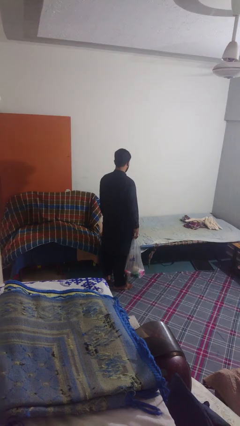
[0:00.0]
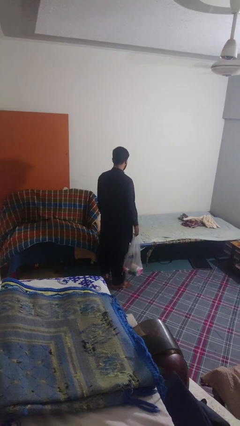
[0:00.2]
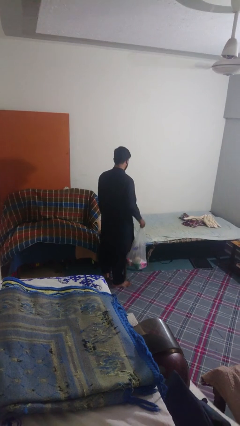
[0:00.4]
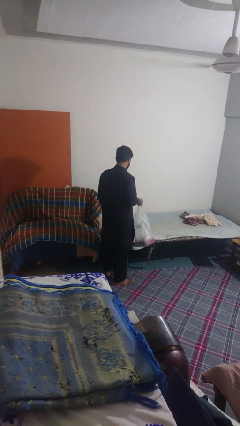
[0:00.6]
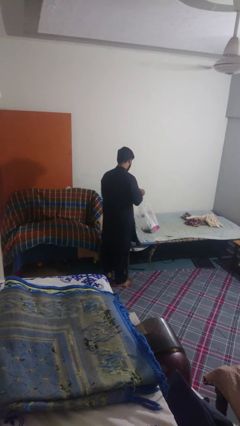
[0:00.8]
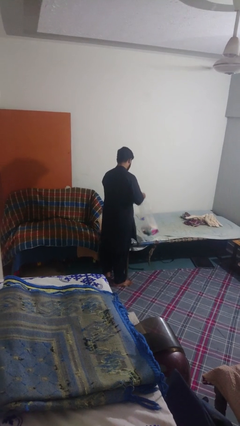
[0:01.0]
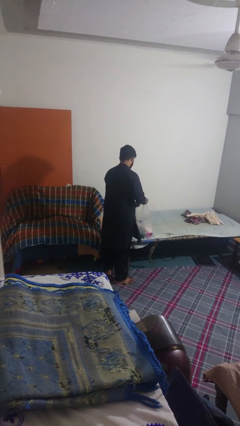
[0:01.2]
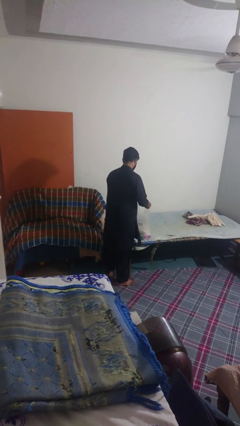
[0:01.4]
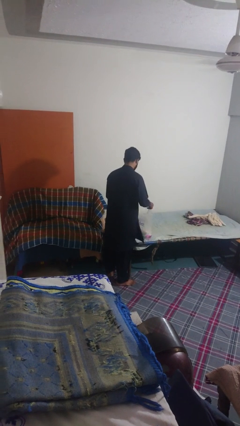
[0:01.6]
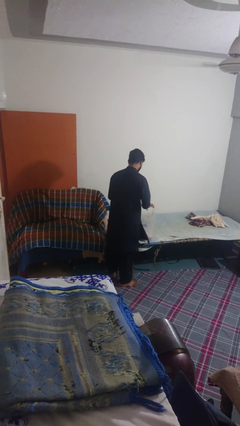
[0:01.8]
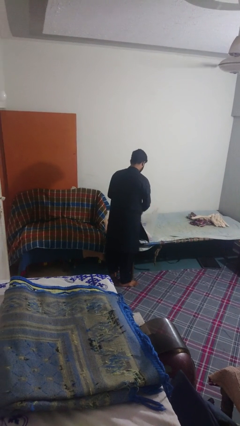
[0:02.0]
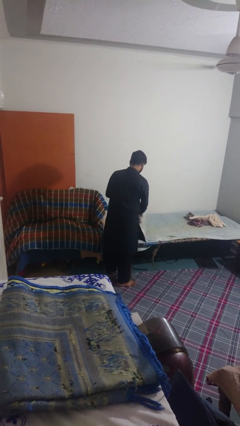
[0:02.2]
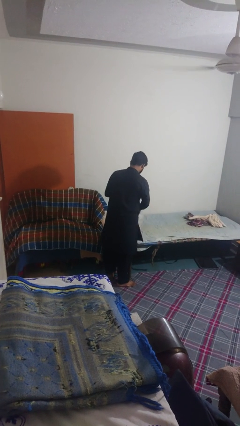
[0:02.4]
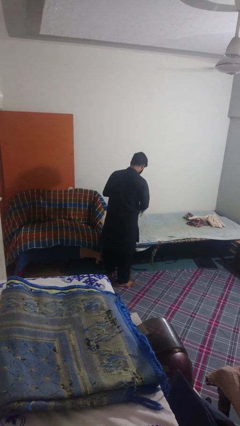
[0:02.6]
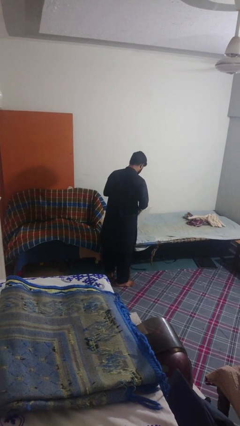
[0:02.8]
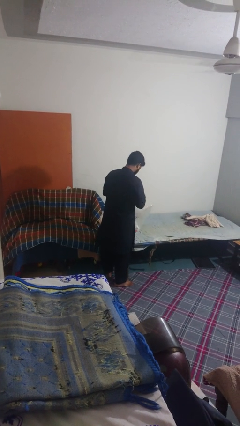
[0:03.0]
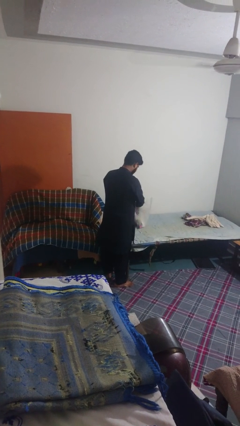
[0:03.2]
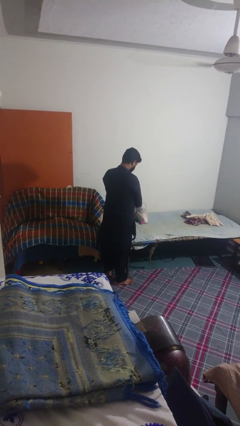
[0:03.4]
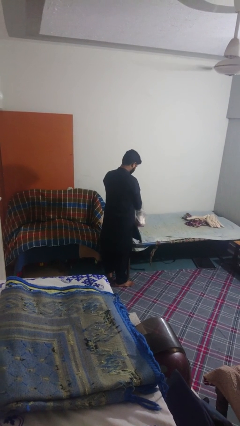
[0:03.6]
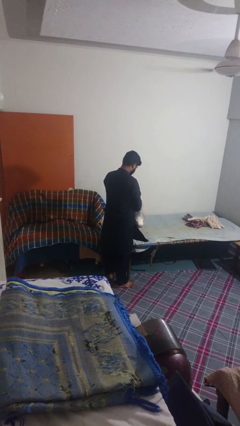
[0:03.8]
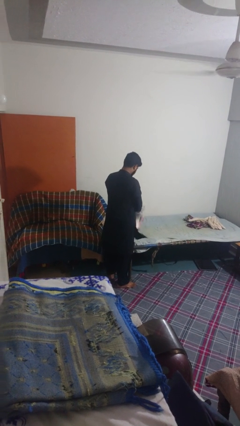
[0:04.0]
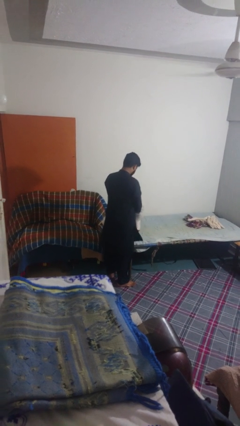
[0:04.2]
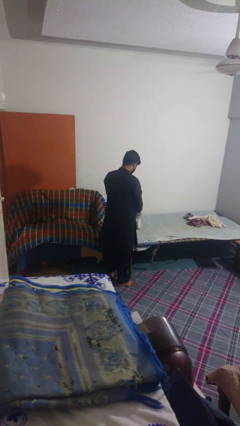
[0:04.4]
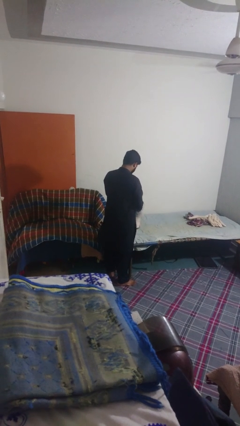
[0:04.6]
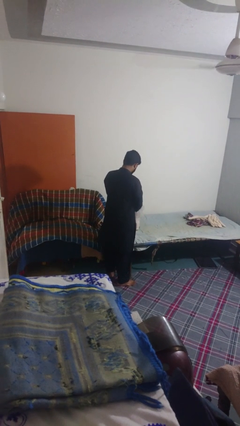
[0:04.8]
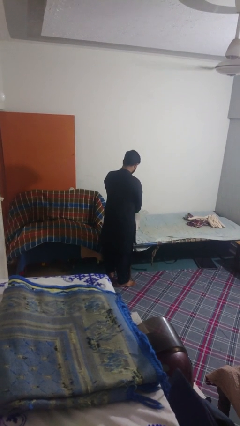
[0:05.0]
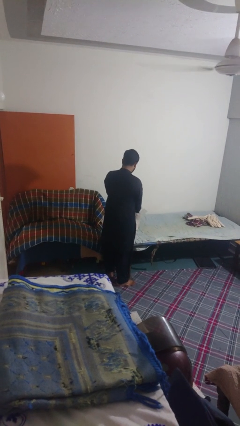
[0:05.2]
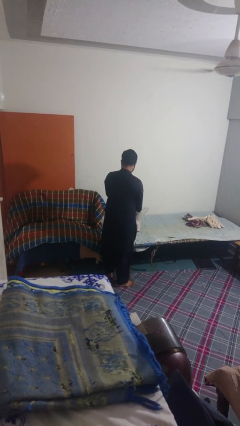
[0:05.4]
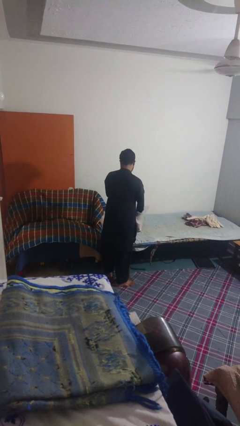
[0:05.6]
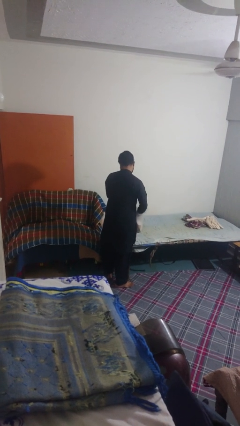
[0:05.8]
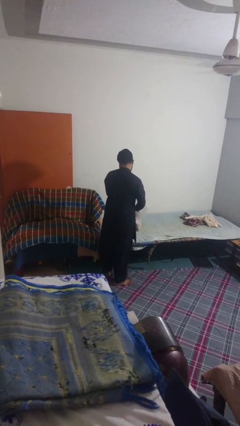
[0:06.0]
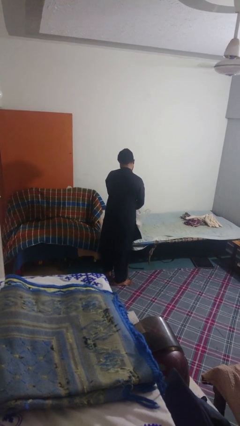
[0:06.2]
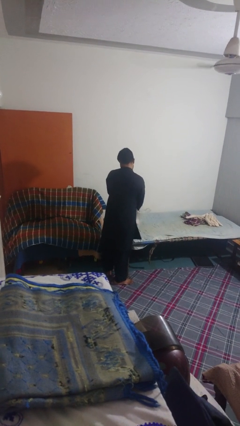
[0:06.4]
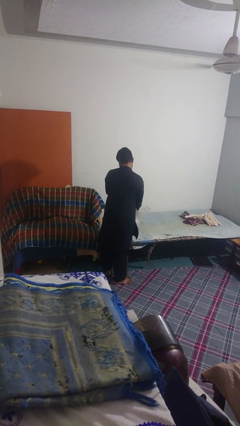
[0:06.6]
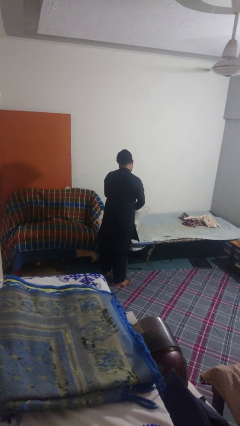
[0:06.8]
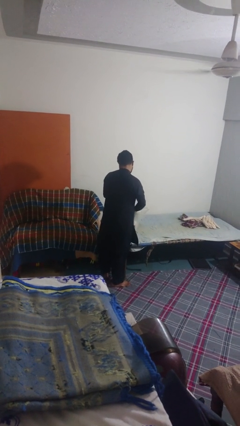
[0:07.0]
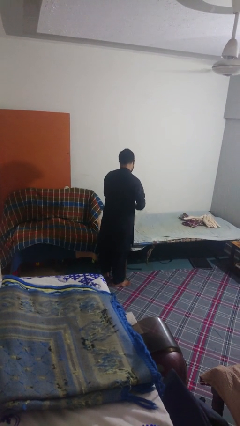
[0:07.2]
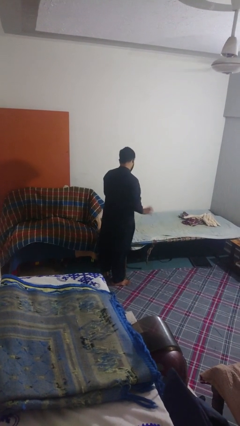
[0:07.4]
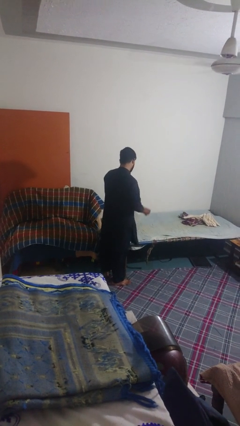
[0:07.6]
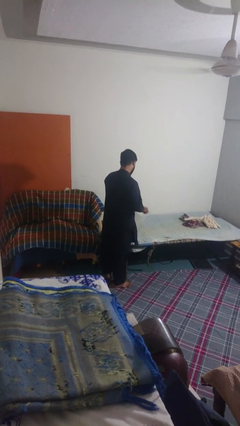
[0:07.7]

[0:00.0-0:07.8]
person searches in bag

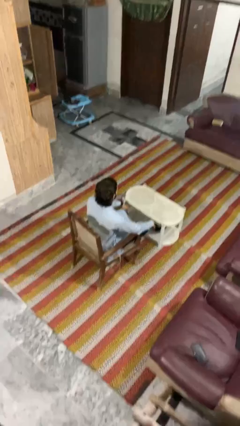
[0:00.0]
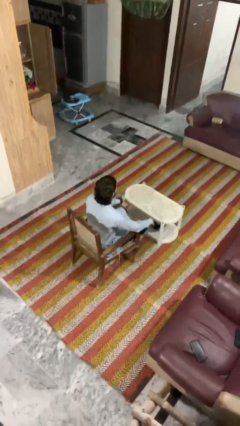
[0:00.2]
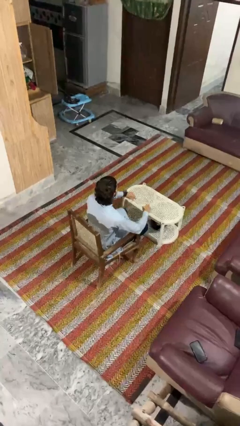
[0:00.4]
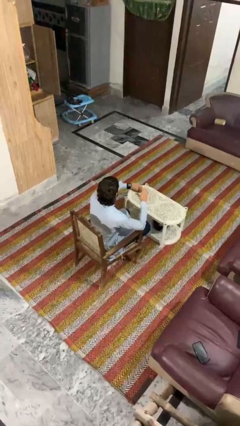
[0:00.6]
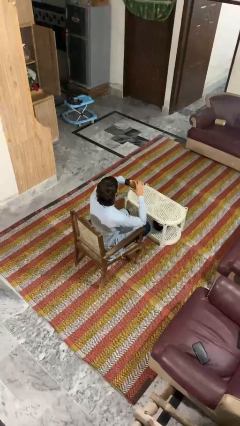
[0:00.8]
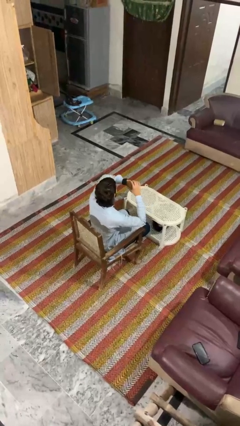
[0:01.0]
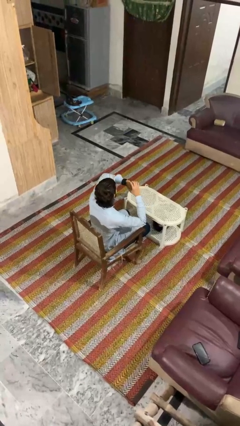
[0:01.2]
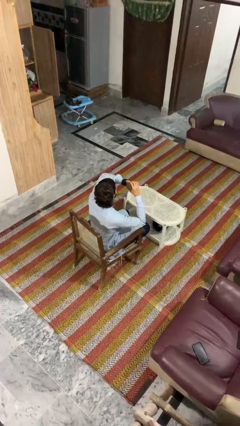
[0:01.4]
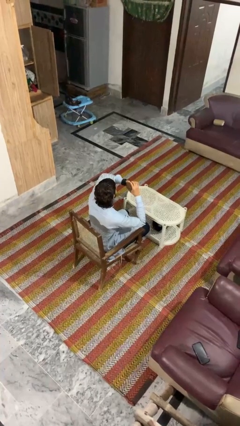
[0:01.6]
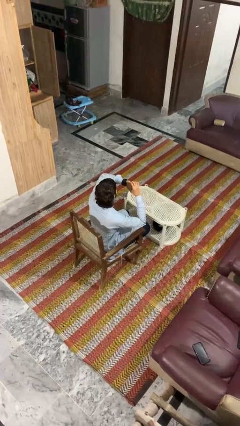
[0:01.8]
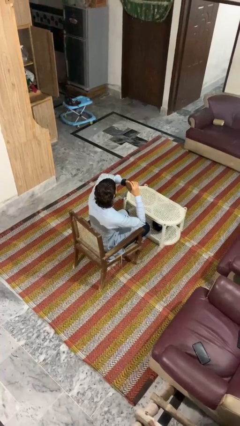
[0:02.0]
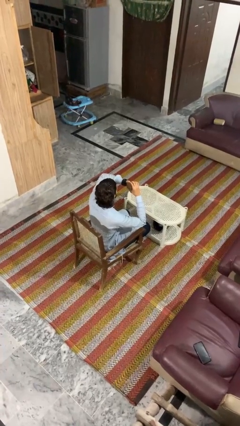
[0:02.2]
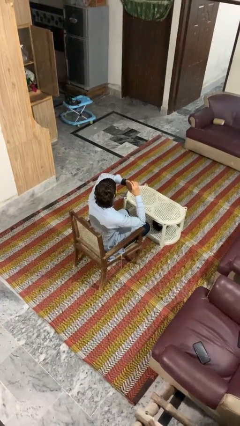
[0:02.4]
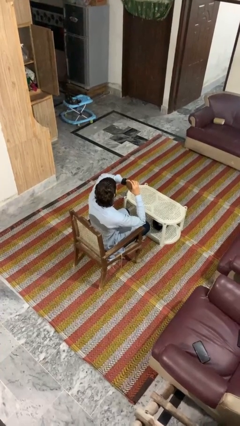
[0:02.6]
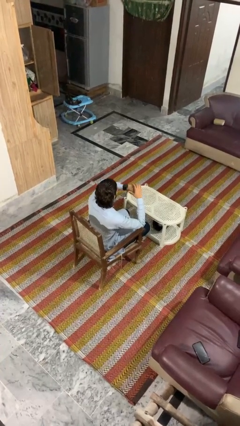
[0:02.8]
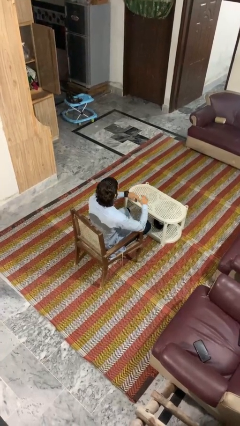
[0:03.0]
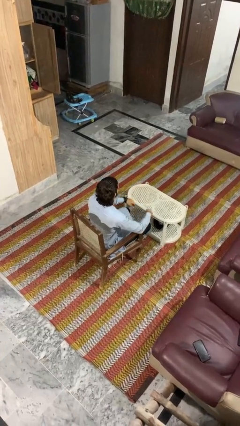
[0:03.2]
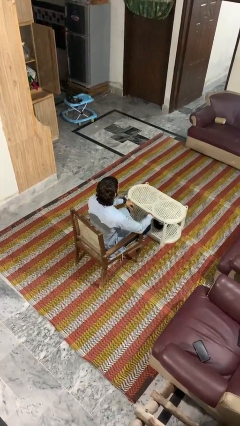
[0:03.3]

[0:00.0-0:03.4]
person looks at wristwatch

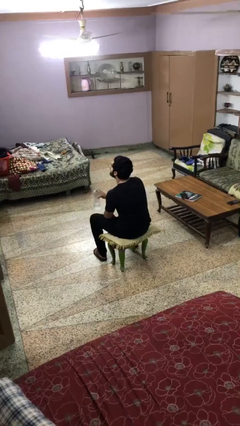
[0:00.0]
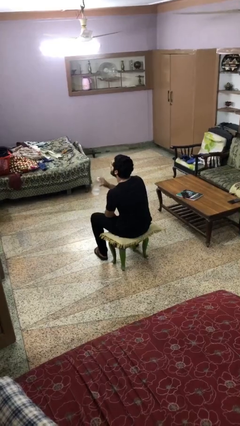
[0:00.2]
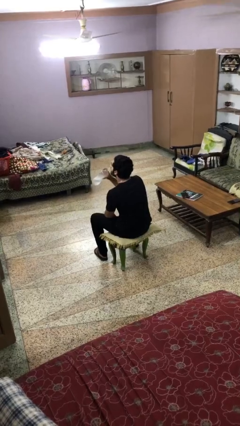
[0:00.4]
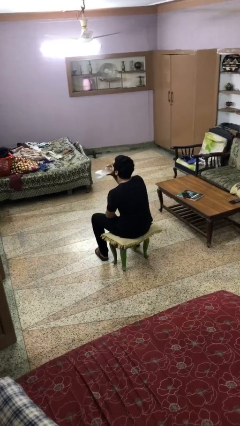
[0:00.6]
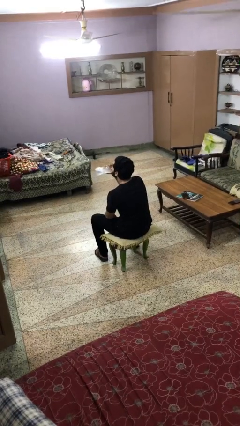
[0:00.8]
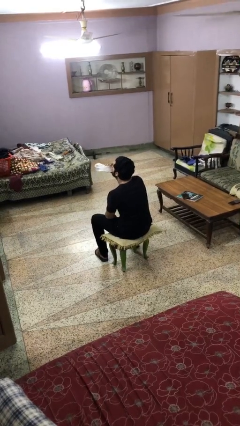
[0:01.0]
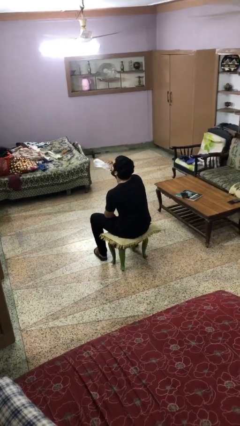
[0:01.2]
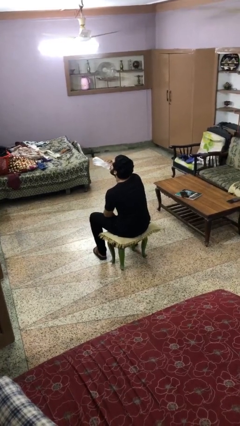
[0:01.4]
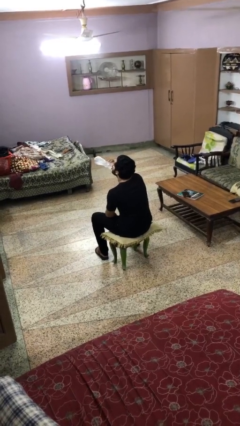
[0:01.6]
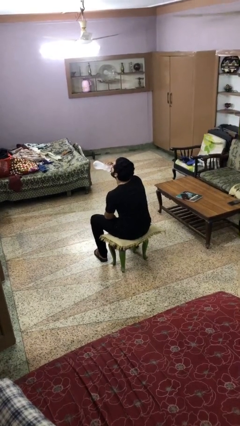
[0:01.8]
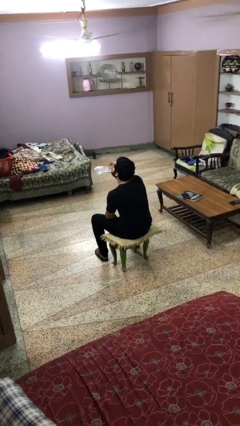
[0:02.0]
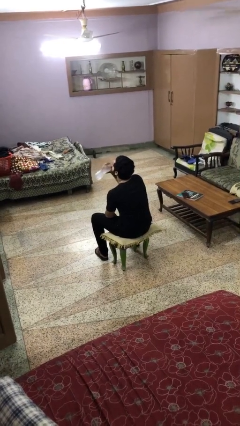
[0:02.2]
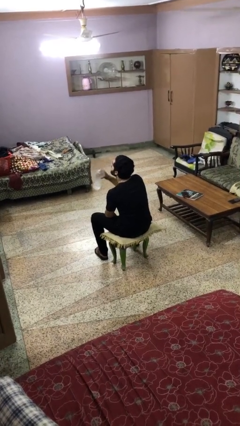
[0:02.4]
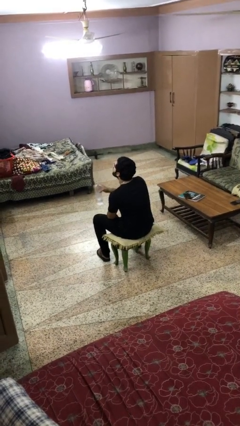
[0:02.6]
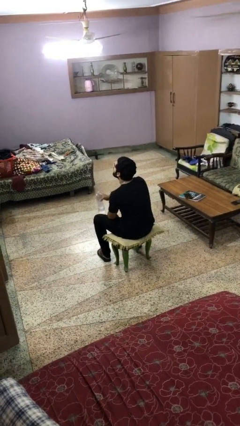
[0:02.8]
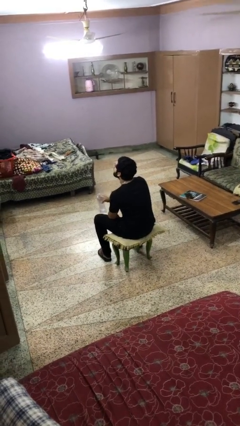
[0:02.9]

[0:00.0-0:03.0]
person drinks from bottle

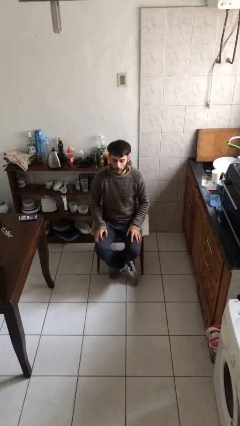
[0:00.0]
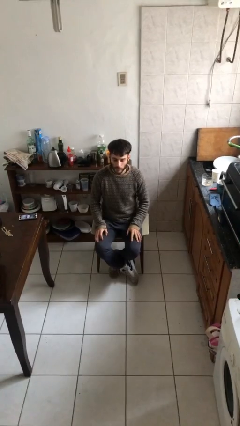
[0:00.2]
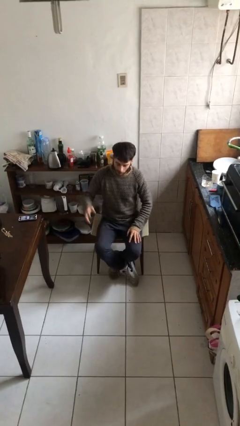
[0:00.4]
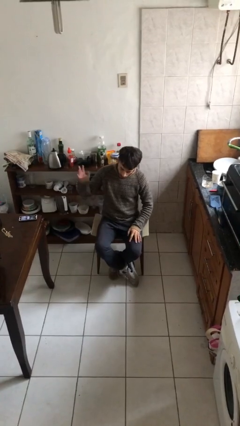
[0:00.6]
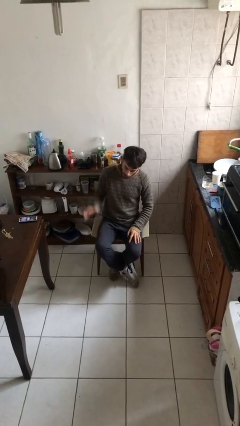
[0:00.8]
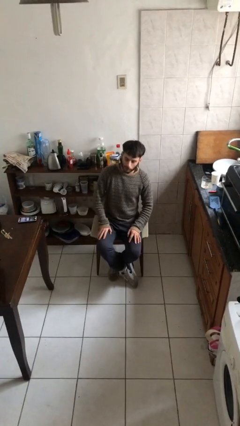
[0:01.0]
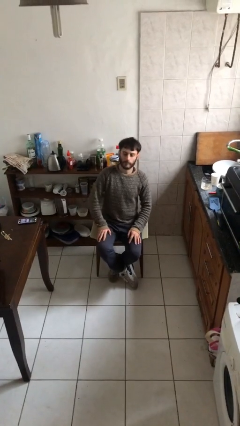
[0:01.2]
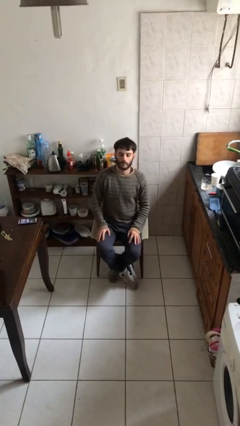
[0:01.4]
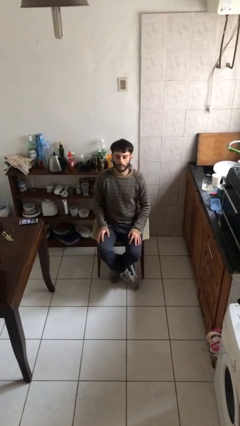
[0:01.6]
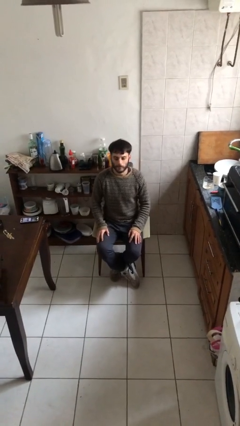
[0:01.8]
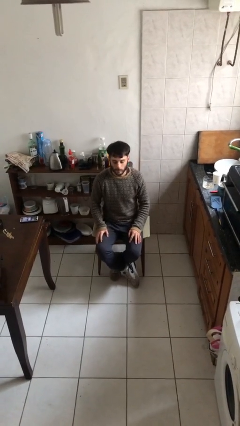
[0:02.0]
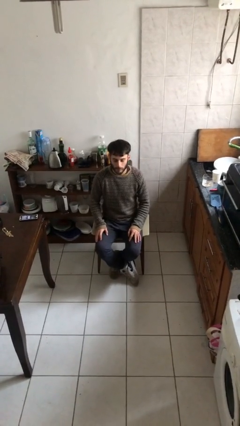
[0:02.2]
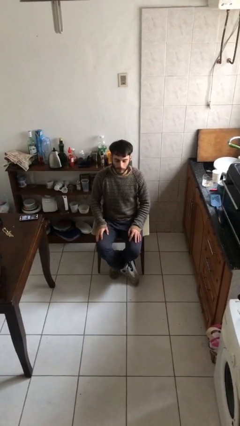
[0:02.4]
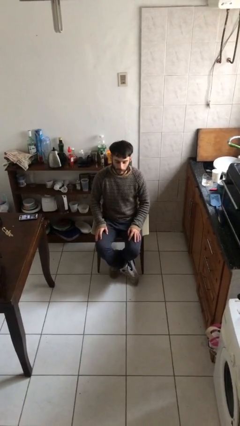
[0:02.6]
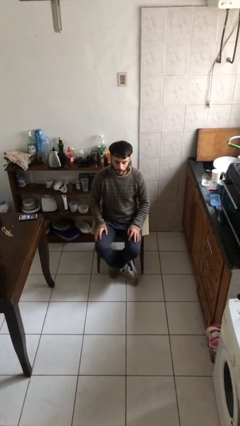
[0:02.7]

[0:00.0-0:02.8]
person slaps hands on thighs

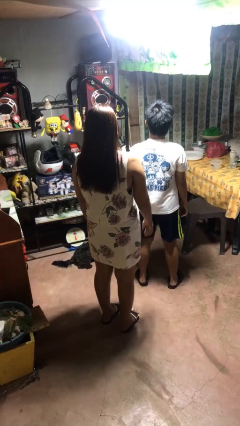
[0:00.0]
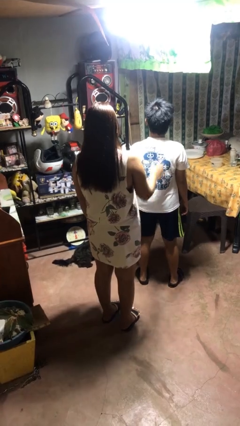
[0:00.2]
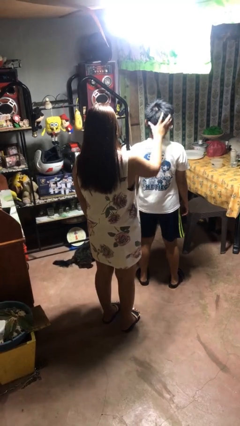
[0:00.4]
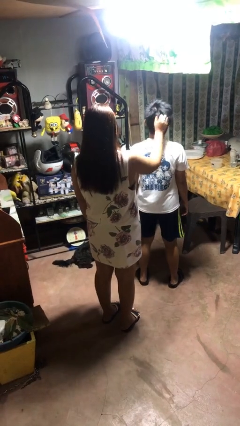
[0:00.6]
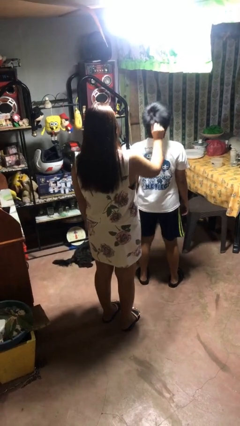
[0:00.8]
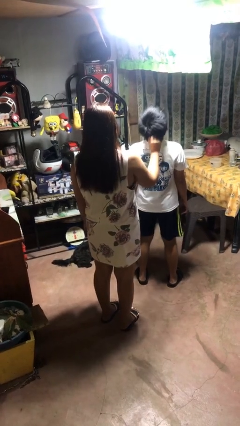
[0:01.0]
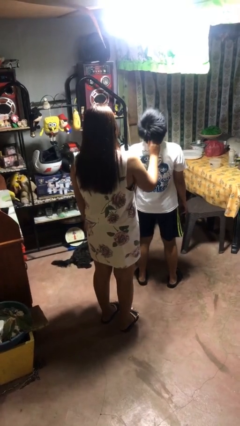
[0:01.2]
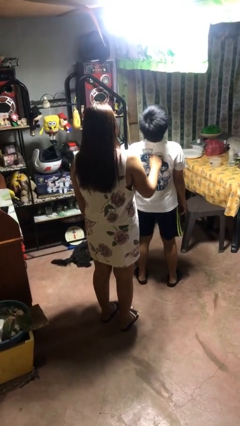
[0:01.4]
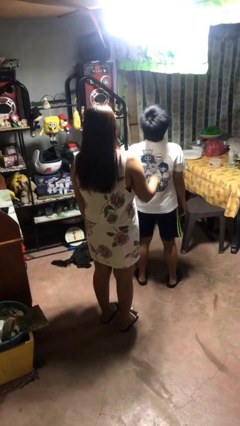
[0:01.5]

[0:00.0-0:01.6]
person grabs person by hair
